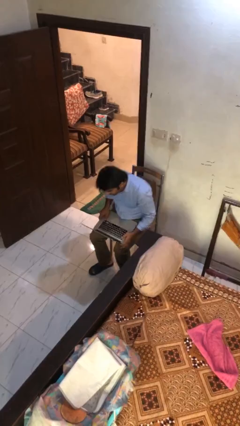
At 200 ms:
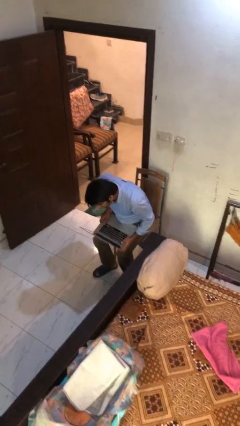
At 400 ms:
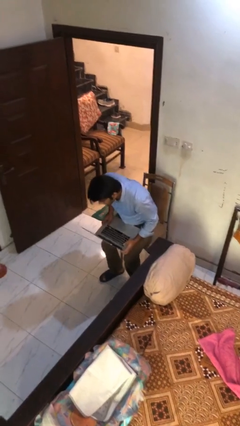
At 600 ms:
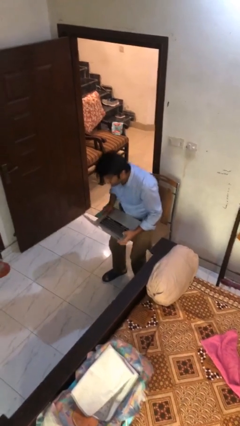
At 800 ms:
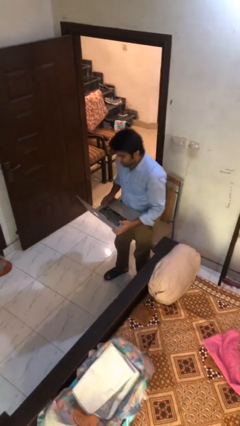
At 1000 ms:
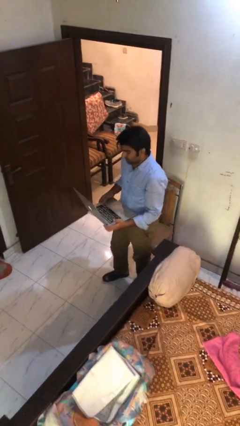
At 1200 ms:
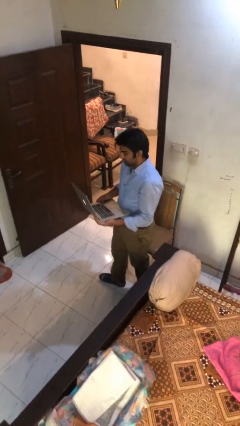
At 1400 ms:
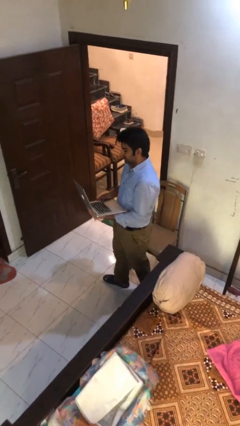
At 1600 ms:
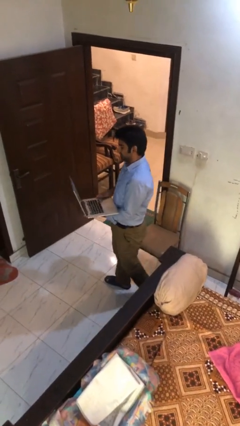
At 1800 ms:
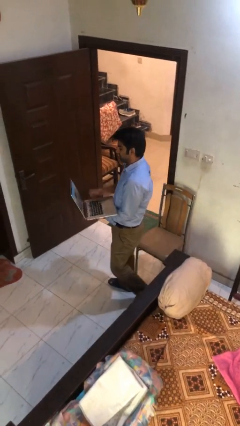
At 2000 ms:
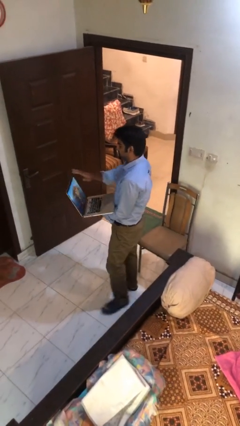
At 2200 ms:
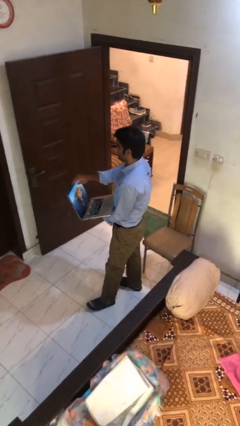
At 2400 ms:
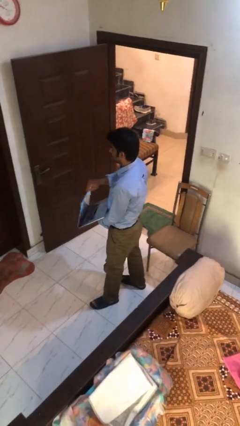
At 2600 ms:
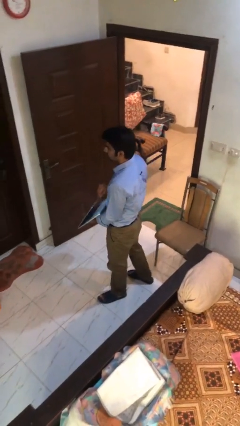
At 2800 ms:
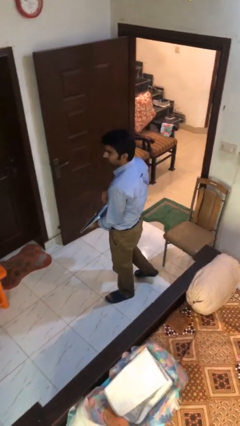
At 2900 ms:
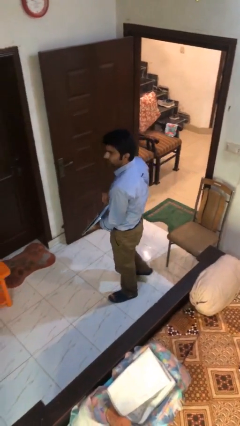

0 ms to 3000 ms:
person stands up

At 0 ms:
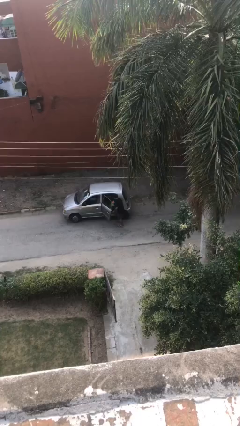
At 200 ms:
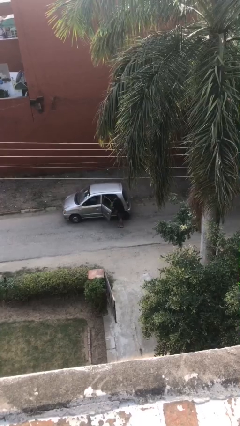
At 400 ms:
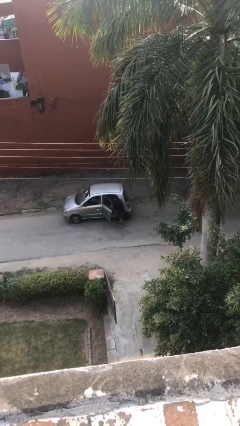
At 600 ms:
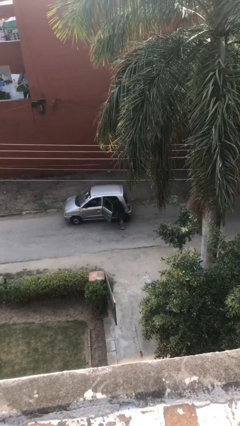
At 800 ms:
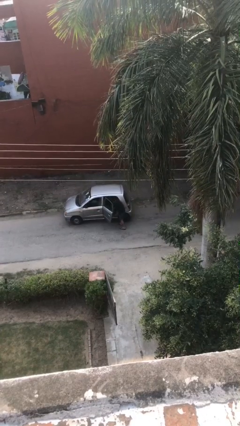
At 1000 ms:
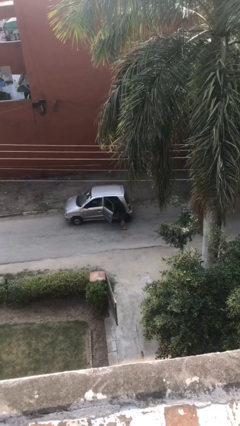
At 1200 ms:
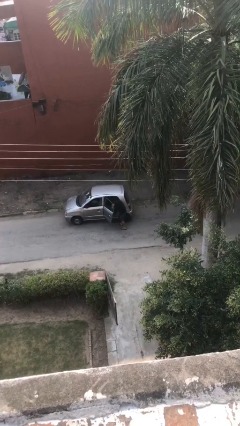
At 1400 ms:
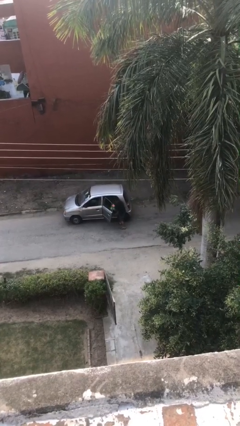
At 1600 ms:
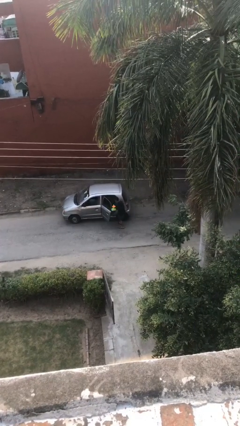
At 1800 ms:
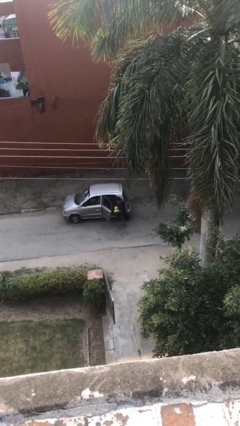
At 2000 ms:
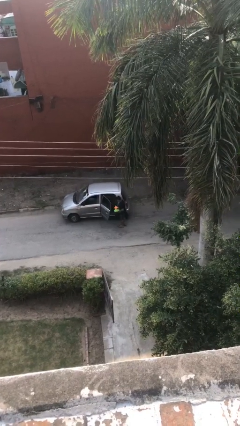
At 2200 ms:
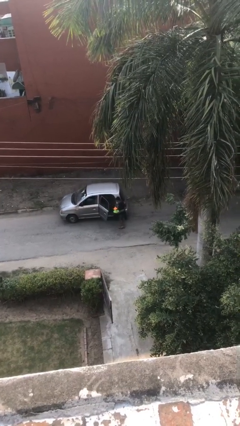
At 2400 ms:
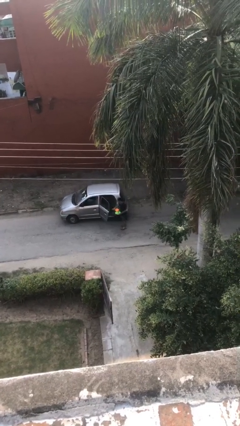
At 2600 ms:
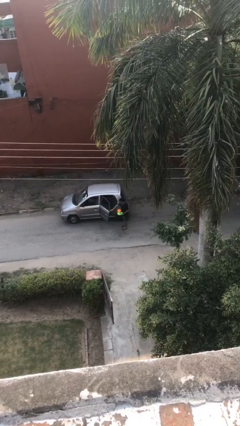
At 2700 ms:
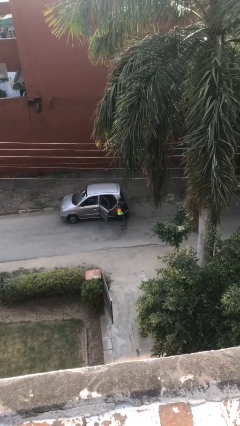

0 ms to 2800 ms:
person unloads car

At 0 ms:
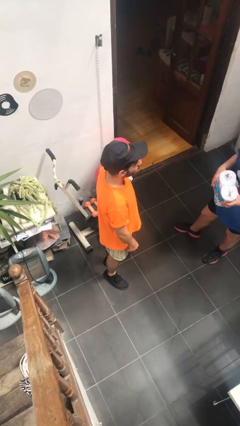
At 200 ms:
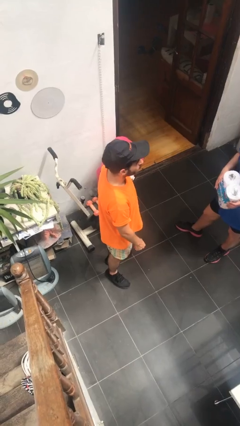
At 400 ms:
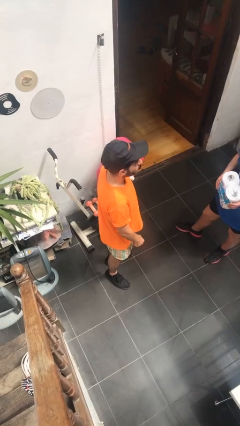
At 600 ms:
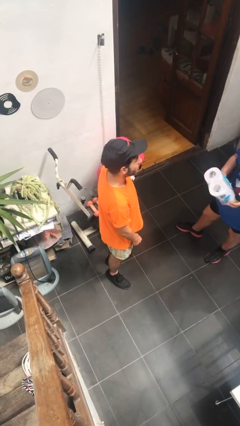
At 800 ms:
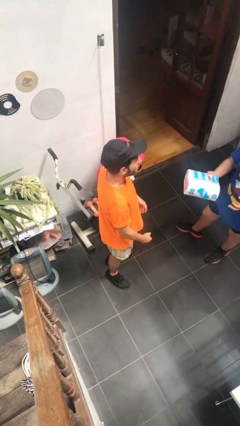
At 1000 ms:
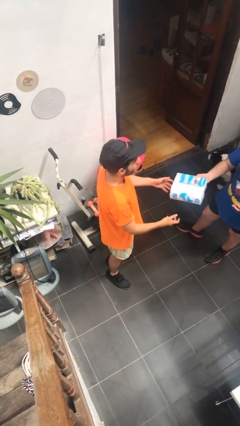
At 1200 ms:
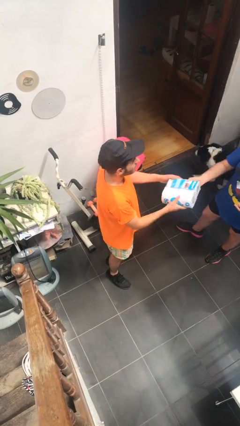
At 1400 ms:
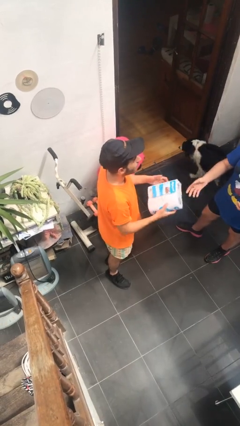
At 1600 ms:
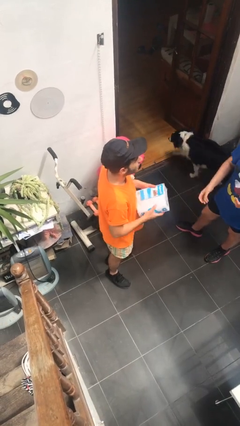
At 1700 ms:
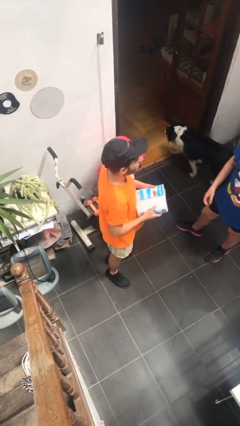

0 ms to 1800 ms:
person transfers object to person

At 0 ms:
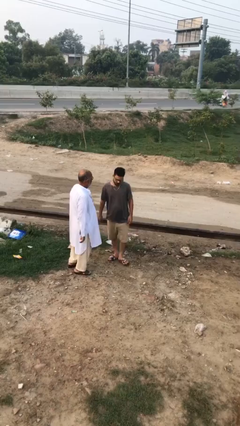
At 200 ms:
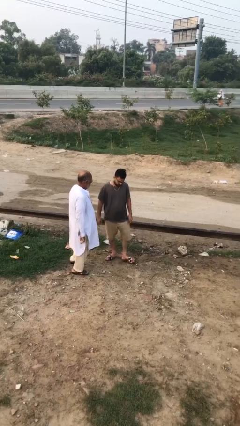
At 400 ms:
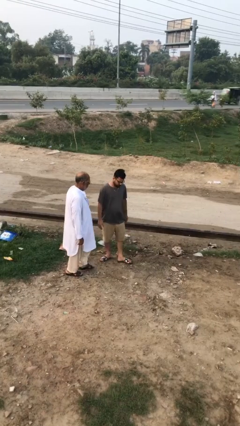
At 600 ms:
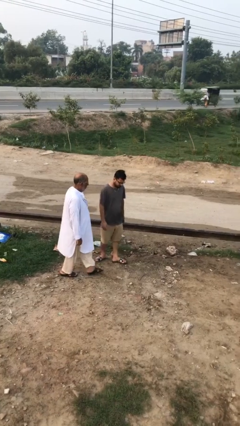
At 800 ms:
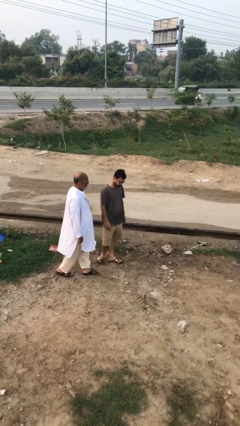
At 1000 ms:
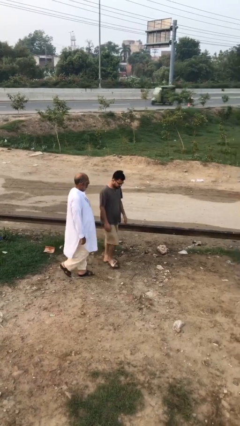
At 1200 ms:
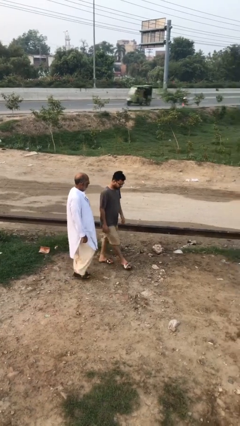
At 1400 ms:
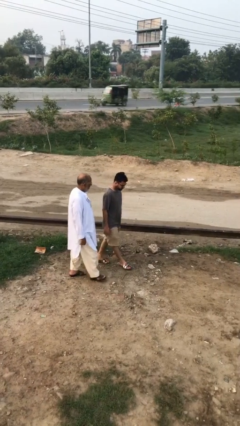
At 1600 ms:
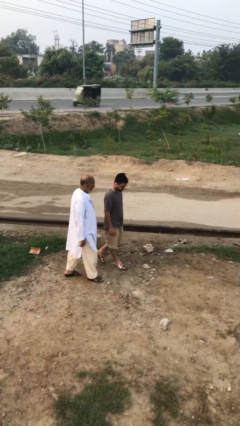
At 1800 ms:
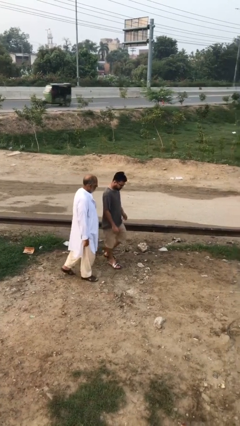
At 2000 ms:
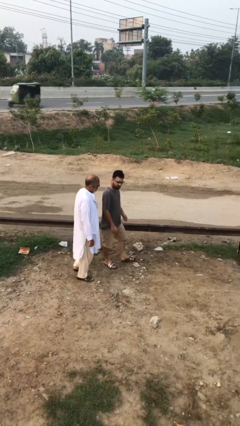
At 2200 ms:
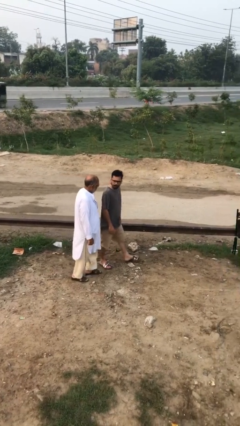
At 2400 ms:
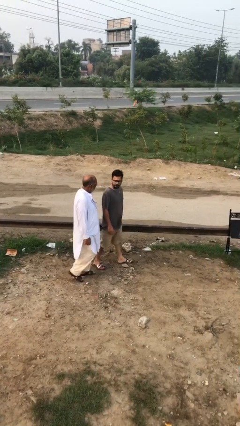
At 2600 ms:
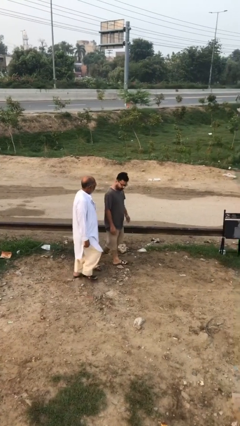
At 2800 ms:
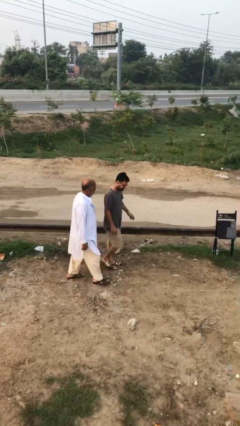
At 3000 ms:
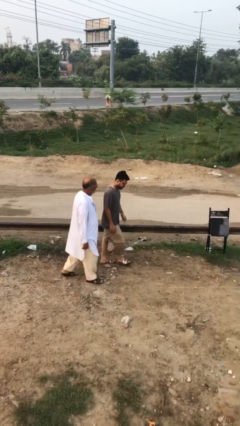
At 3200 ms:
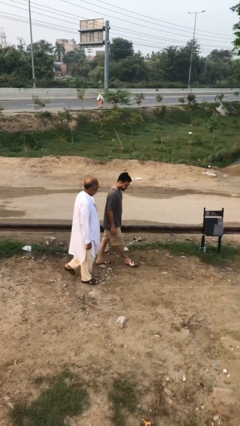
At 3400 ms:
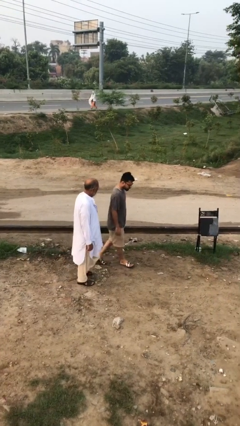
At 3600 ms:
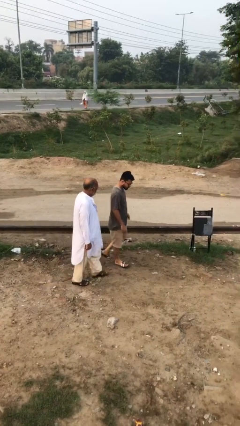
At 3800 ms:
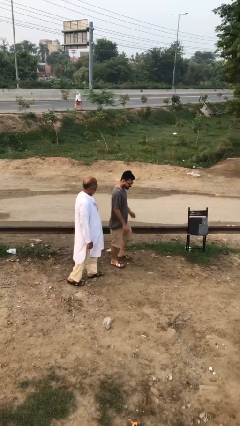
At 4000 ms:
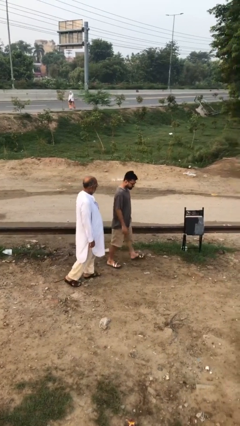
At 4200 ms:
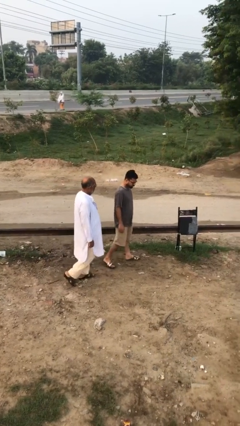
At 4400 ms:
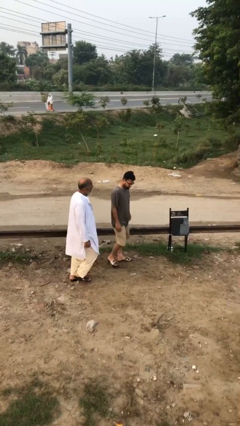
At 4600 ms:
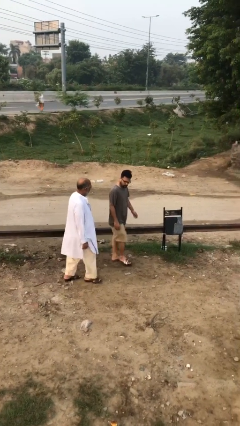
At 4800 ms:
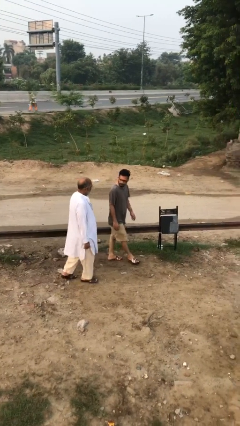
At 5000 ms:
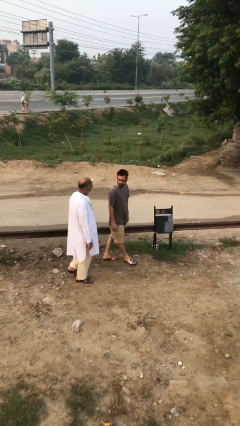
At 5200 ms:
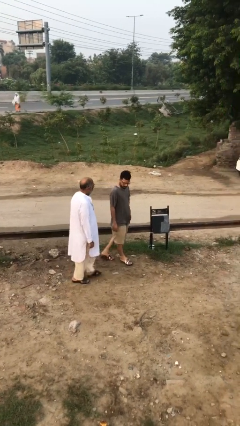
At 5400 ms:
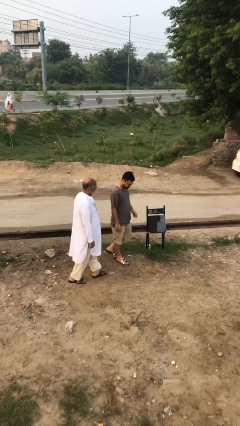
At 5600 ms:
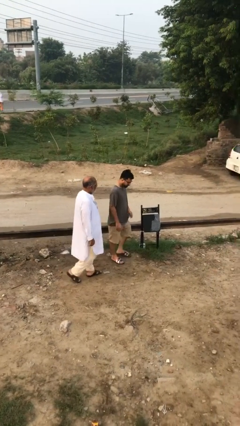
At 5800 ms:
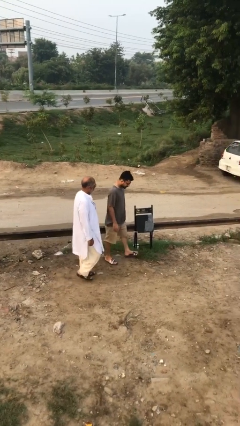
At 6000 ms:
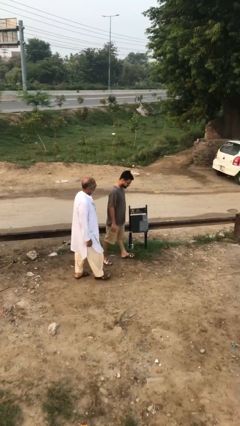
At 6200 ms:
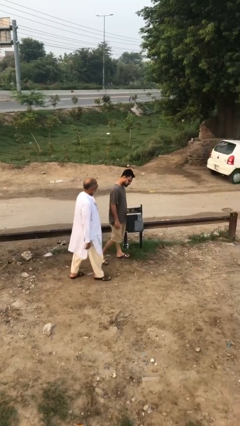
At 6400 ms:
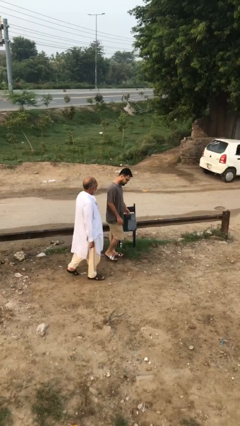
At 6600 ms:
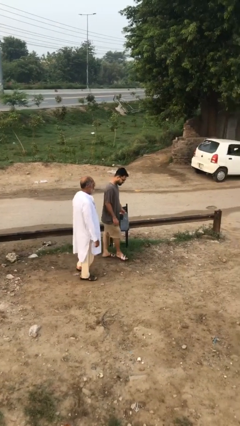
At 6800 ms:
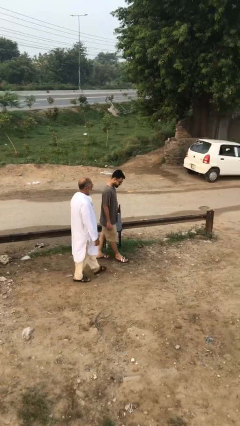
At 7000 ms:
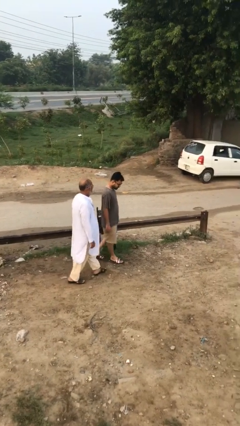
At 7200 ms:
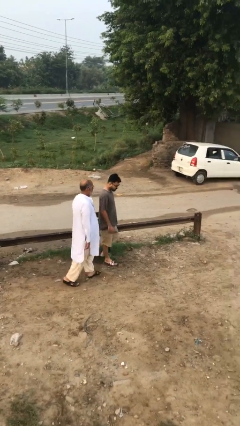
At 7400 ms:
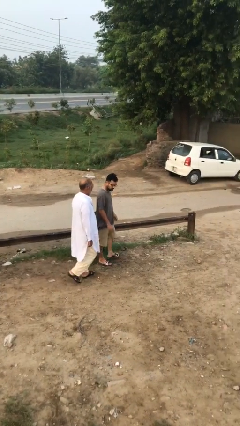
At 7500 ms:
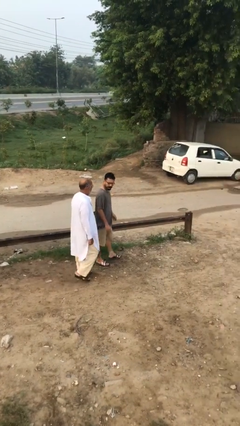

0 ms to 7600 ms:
person talks to person

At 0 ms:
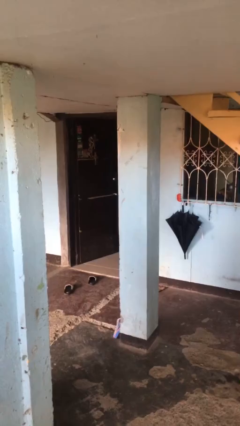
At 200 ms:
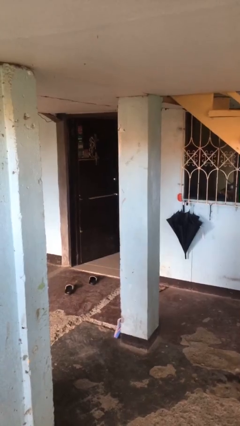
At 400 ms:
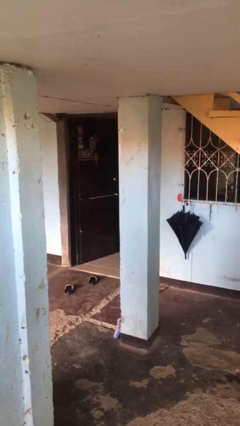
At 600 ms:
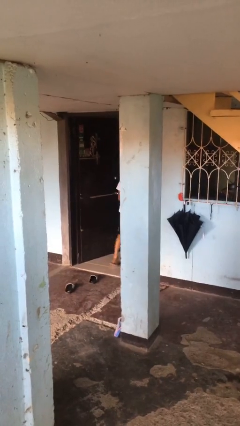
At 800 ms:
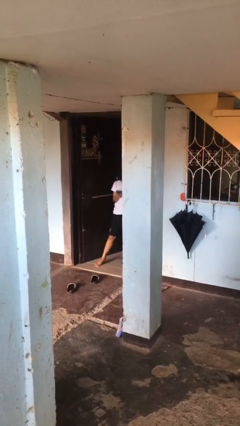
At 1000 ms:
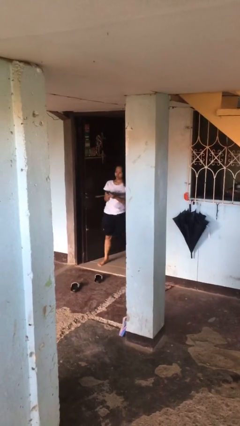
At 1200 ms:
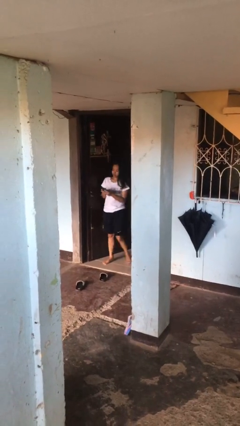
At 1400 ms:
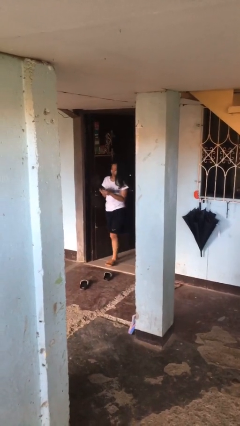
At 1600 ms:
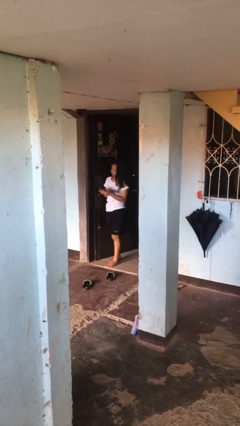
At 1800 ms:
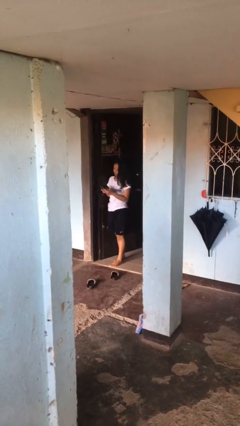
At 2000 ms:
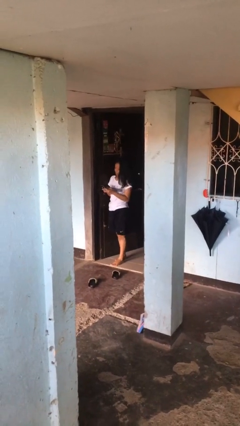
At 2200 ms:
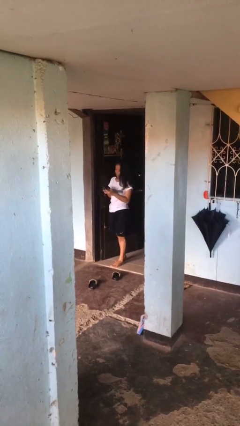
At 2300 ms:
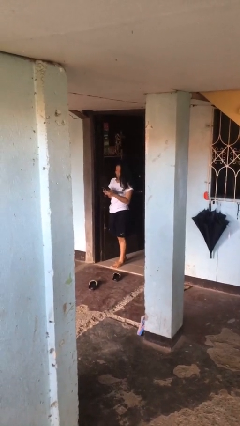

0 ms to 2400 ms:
person enters scene through structure
